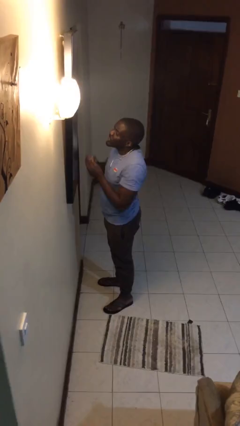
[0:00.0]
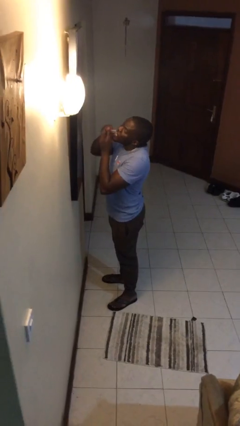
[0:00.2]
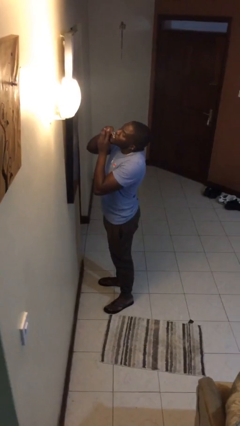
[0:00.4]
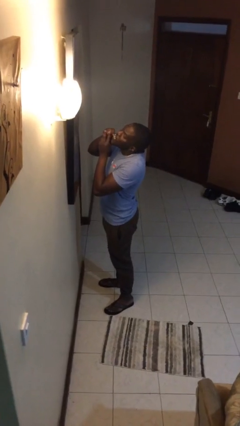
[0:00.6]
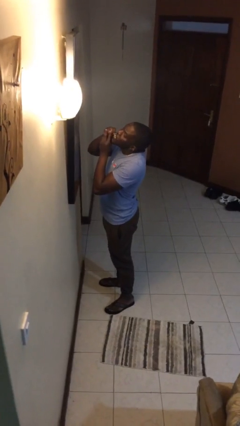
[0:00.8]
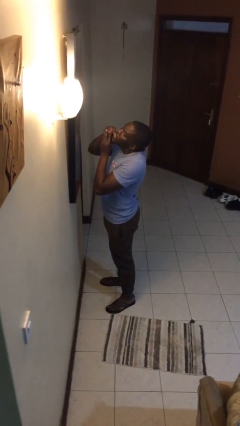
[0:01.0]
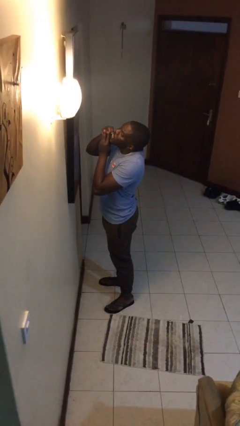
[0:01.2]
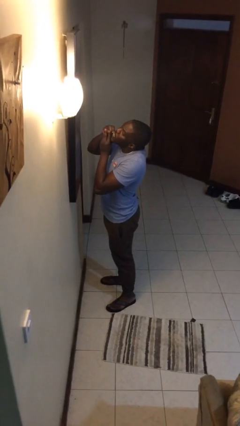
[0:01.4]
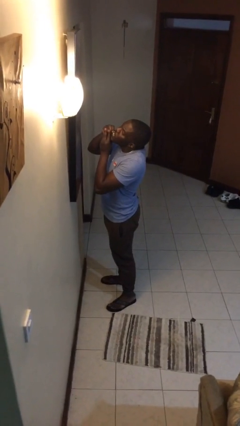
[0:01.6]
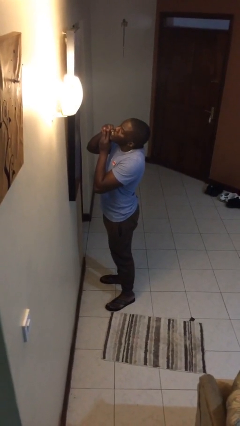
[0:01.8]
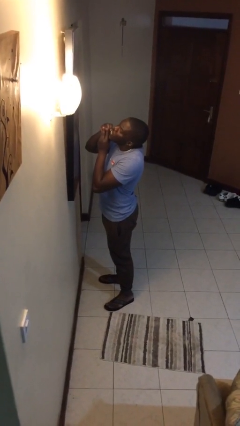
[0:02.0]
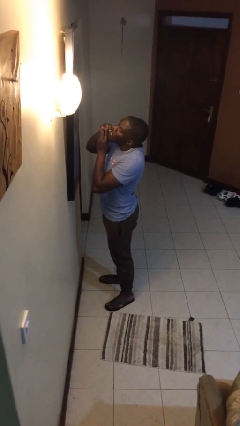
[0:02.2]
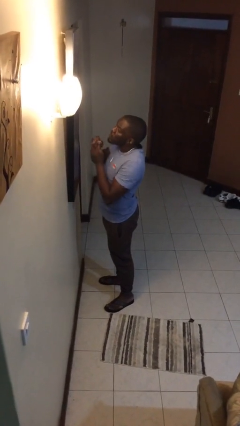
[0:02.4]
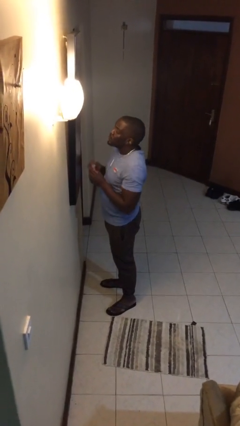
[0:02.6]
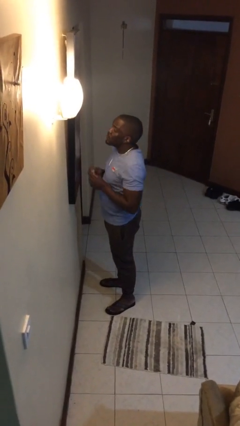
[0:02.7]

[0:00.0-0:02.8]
person flosses

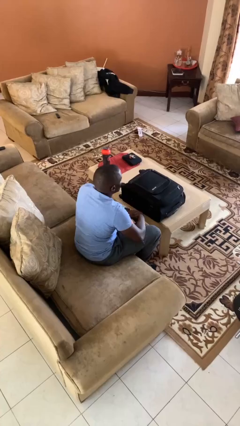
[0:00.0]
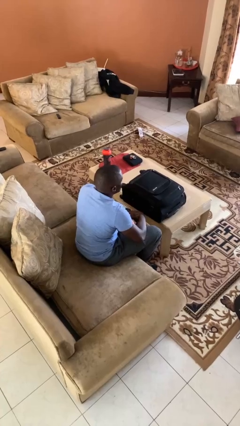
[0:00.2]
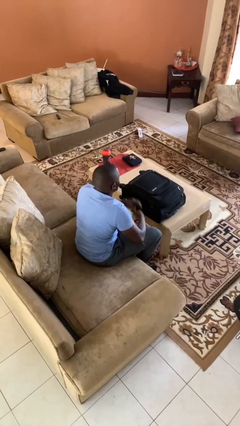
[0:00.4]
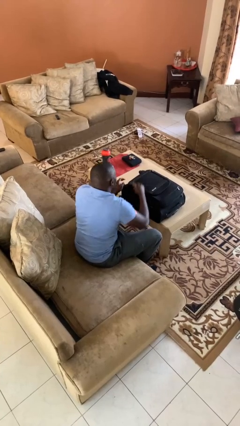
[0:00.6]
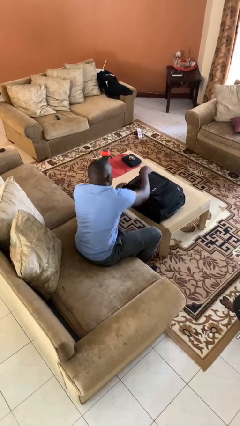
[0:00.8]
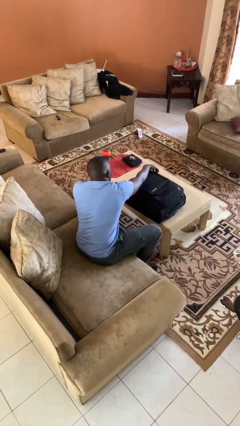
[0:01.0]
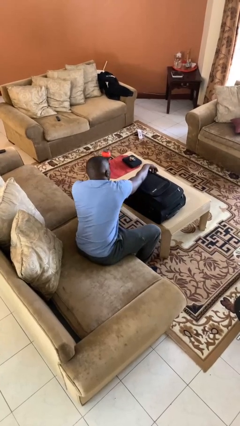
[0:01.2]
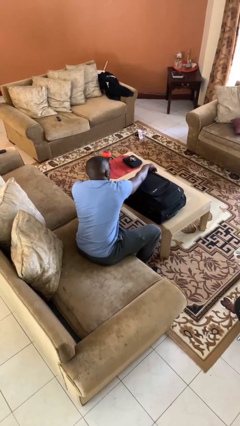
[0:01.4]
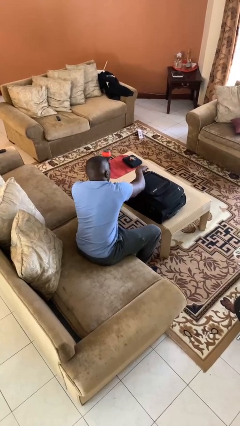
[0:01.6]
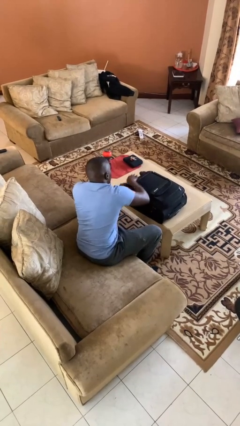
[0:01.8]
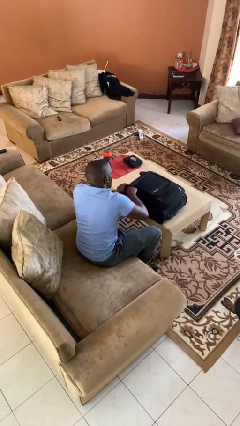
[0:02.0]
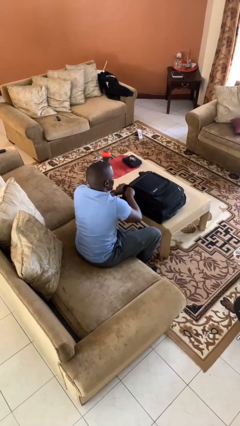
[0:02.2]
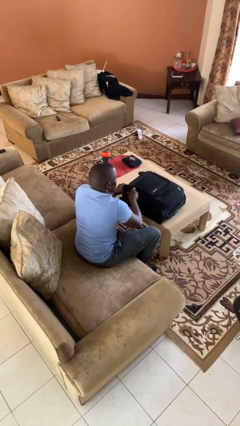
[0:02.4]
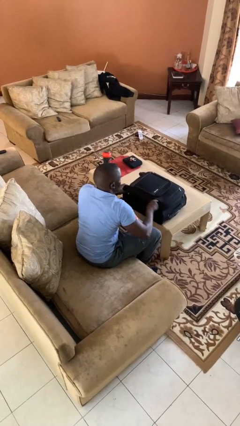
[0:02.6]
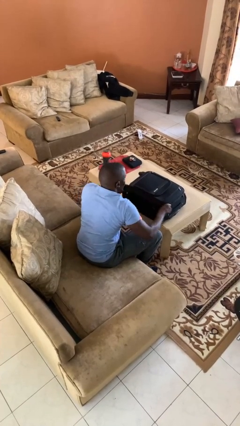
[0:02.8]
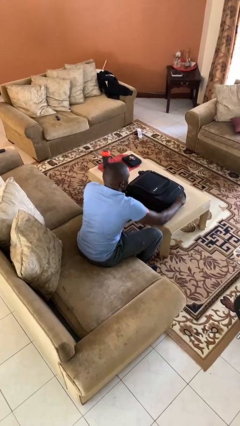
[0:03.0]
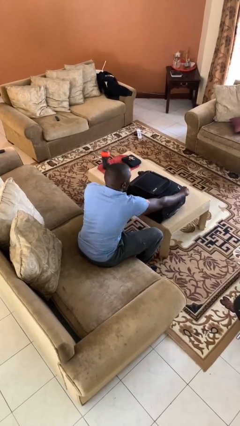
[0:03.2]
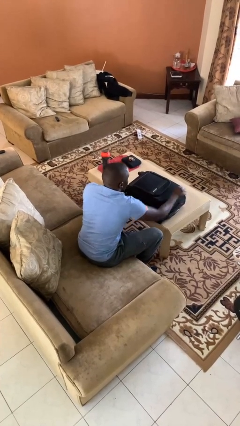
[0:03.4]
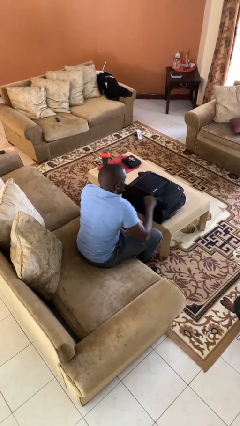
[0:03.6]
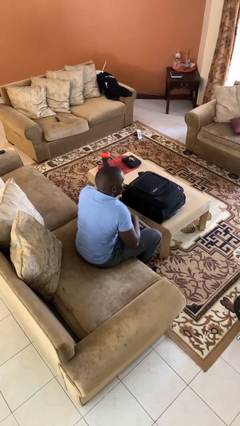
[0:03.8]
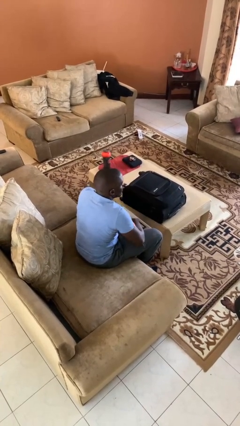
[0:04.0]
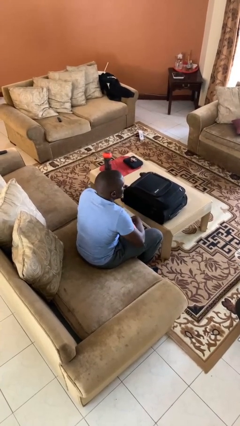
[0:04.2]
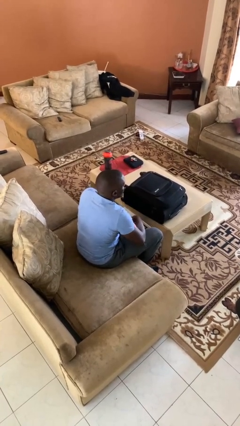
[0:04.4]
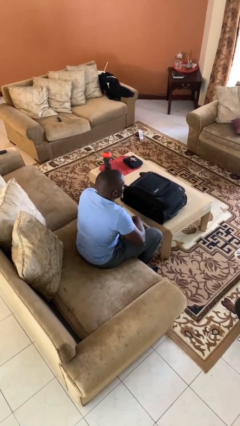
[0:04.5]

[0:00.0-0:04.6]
person closes suitcase

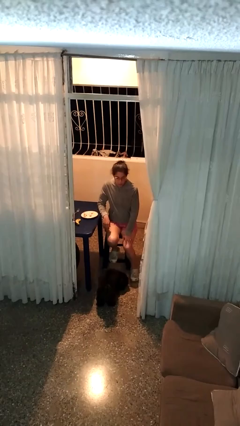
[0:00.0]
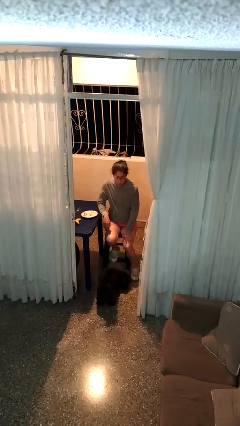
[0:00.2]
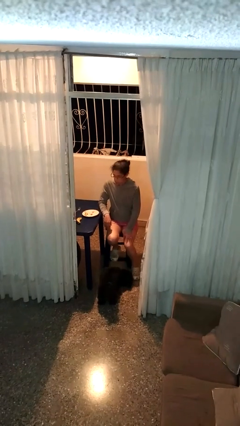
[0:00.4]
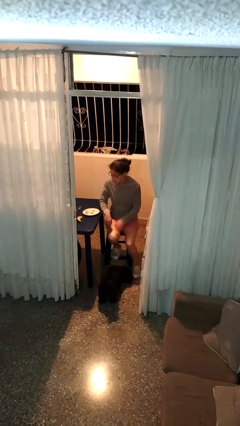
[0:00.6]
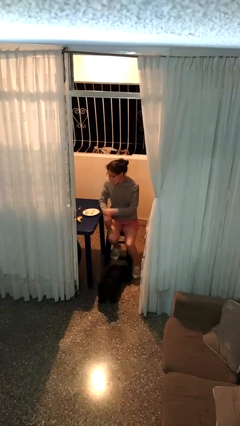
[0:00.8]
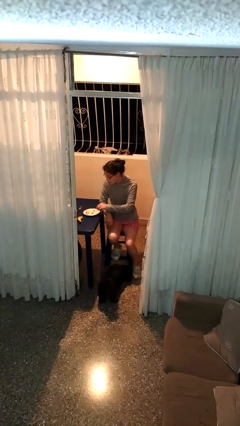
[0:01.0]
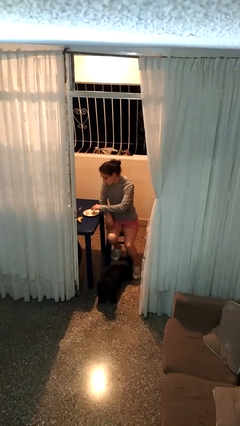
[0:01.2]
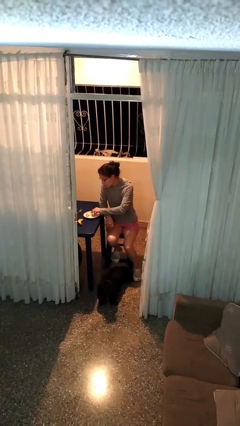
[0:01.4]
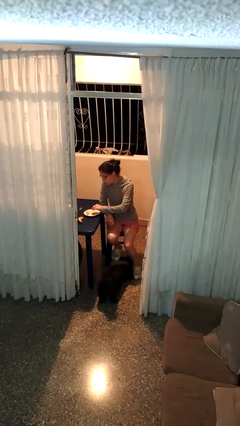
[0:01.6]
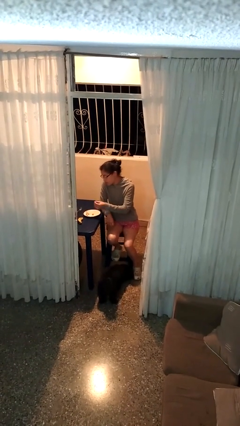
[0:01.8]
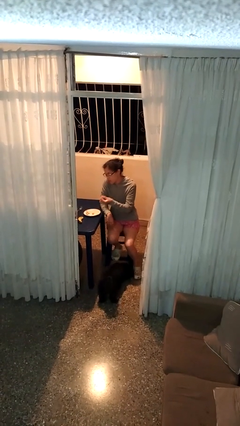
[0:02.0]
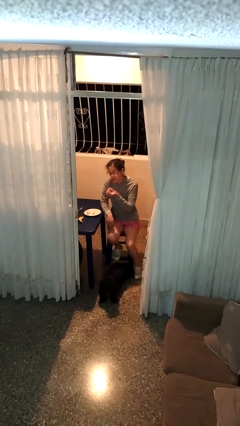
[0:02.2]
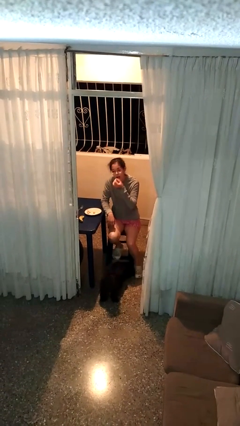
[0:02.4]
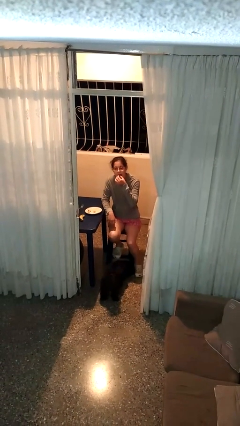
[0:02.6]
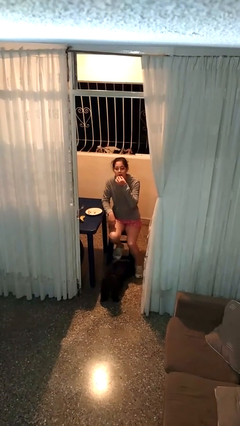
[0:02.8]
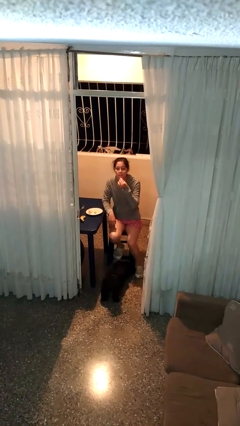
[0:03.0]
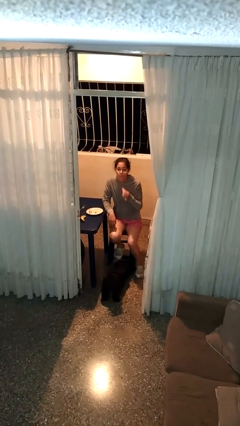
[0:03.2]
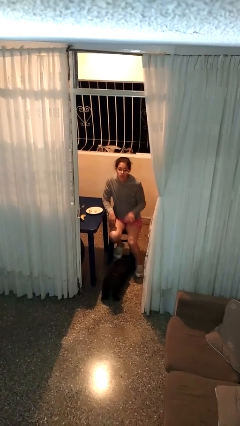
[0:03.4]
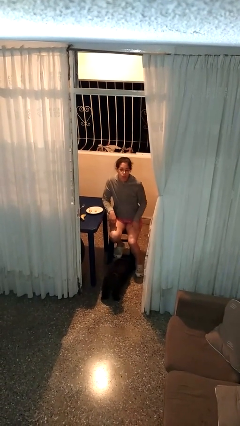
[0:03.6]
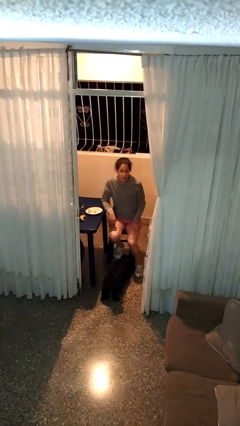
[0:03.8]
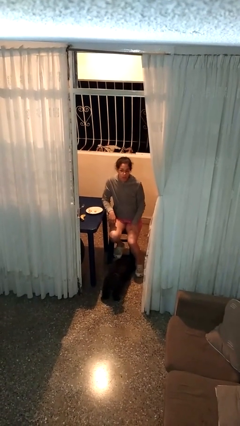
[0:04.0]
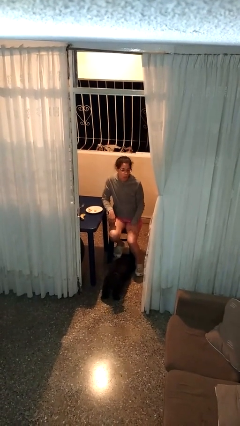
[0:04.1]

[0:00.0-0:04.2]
person eats with hands

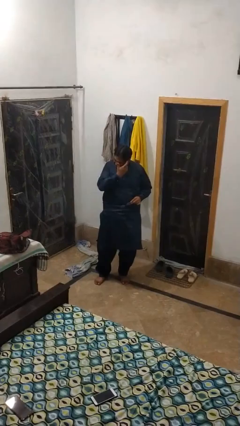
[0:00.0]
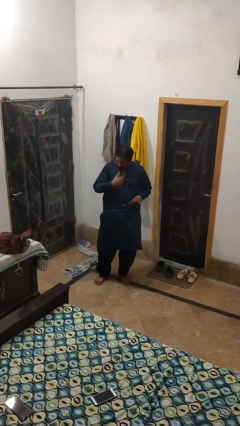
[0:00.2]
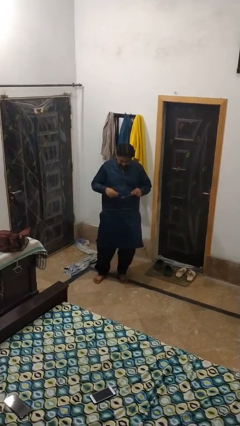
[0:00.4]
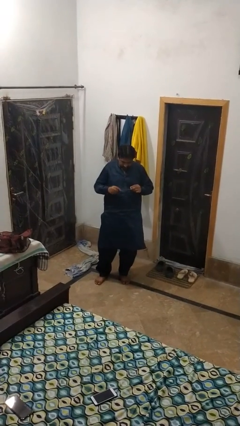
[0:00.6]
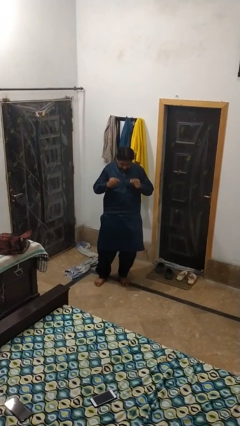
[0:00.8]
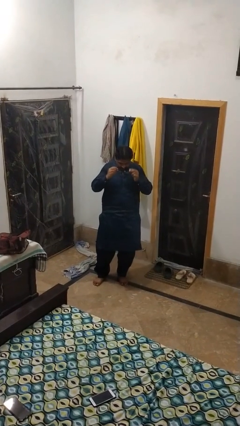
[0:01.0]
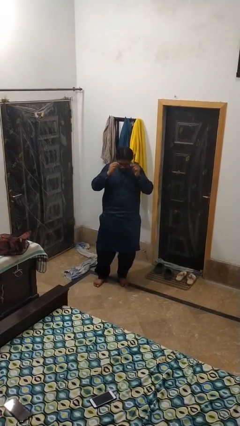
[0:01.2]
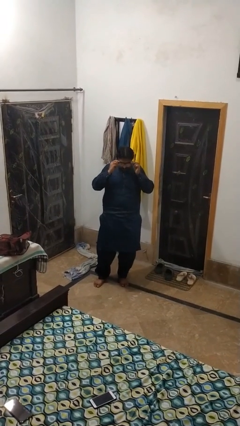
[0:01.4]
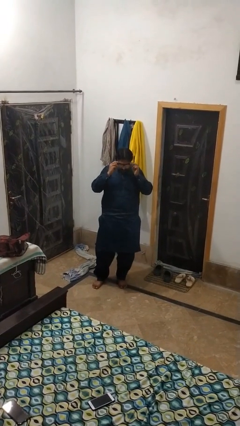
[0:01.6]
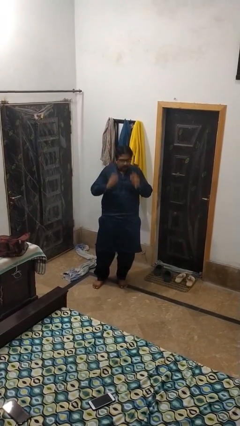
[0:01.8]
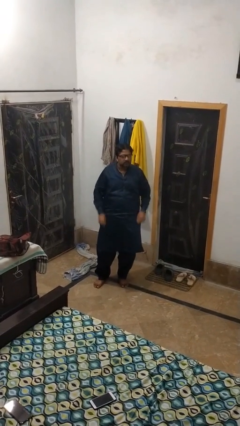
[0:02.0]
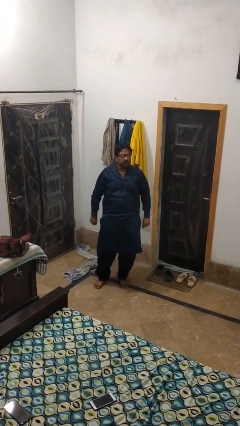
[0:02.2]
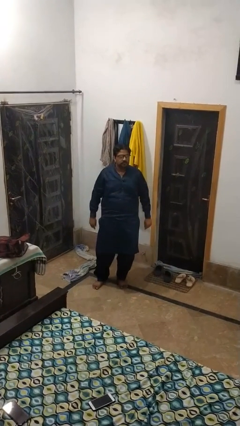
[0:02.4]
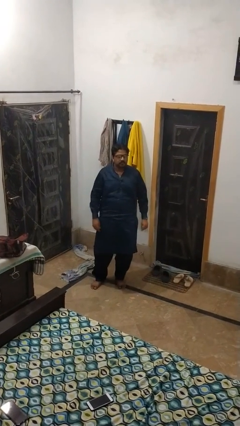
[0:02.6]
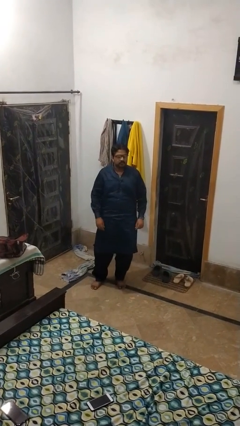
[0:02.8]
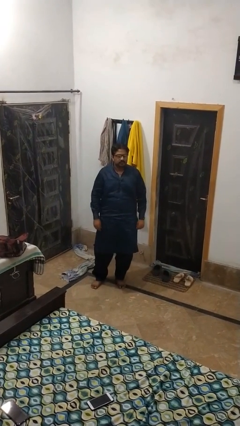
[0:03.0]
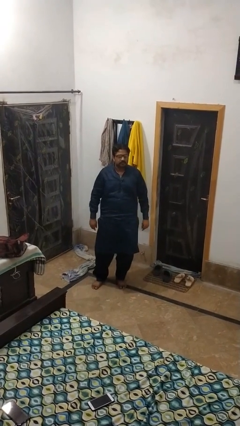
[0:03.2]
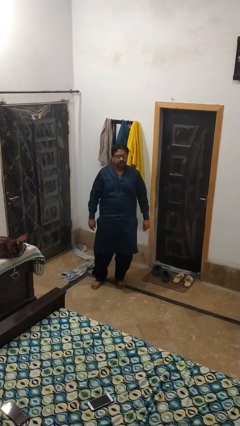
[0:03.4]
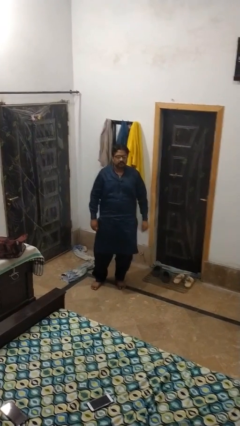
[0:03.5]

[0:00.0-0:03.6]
person puts on glasses

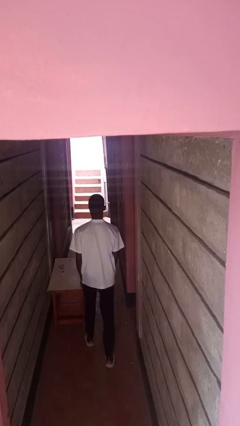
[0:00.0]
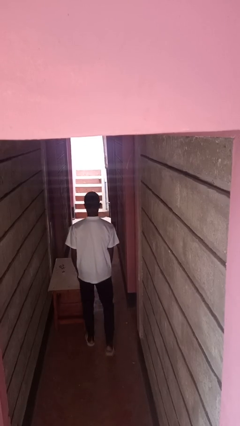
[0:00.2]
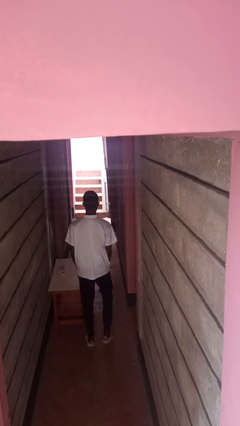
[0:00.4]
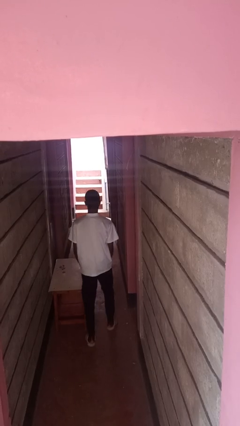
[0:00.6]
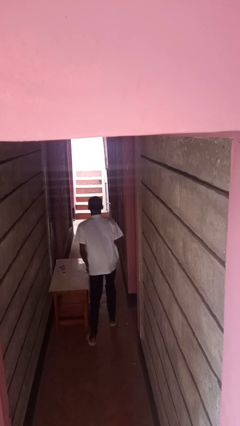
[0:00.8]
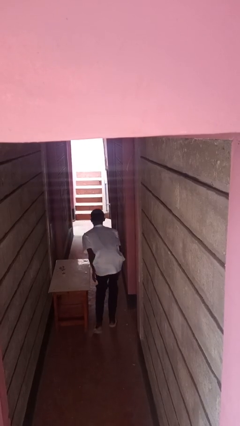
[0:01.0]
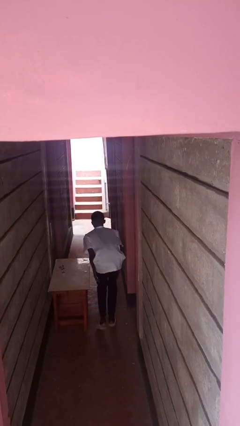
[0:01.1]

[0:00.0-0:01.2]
person bumps into table

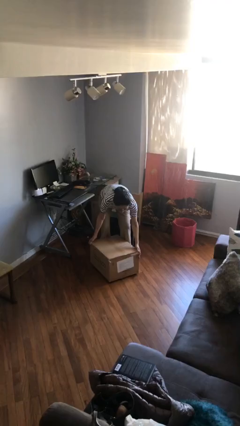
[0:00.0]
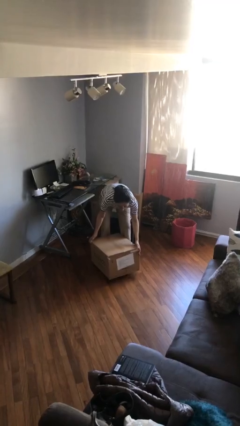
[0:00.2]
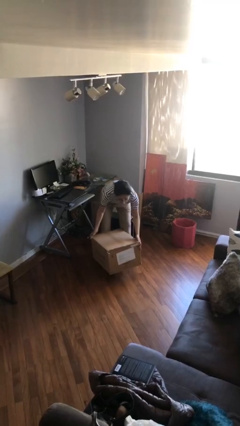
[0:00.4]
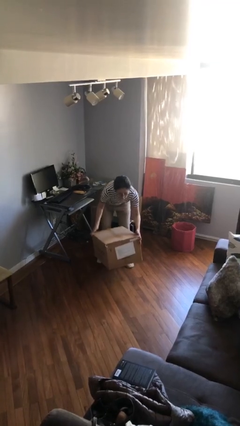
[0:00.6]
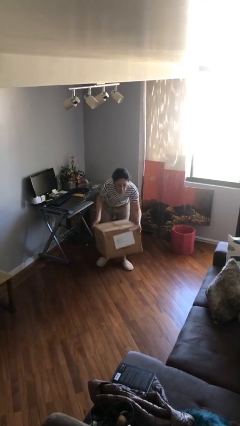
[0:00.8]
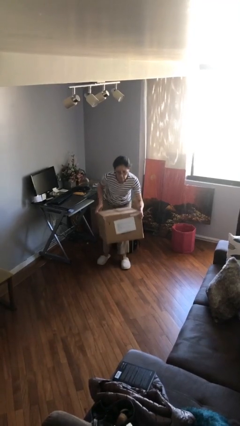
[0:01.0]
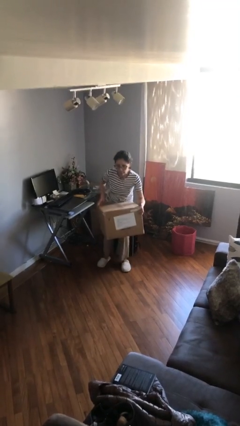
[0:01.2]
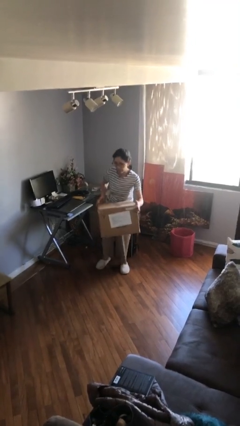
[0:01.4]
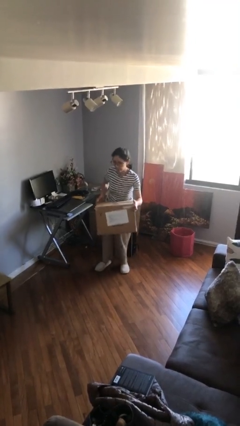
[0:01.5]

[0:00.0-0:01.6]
person picks up object from floor
